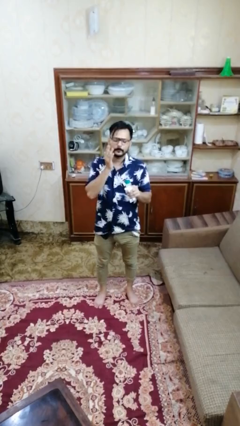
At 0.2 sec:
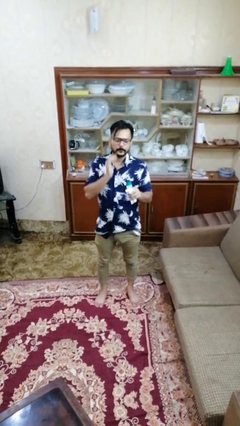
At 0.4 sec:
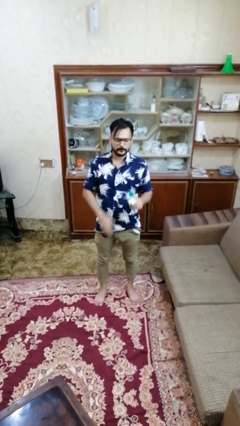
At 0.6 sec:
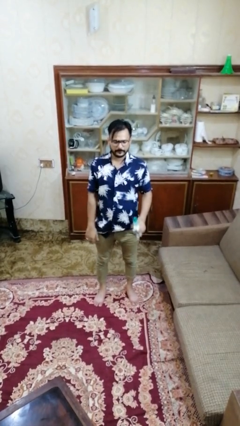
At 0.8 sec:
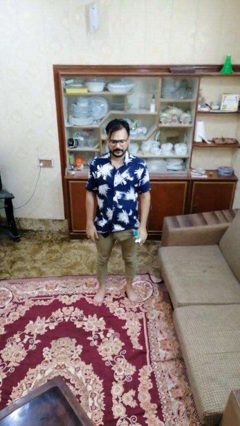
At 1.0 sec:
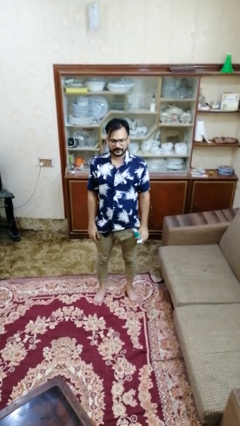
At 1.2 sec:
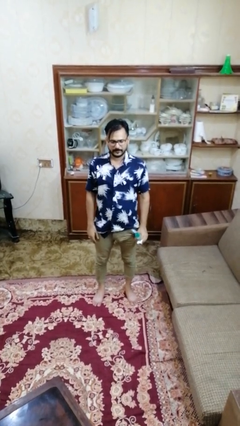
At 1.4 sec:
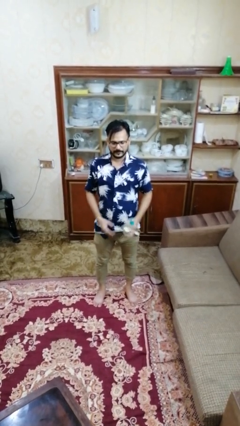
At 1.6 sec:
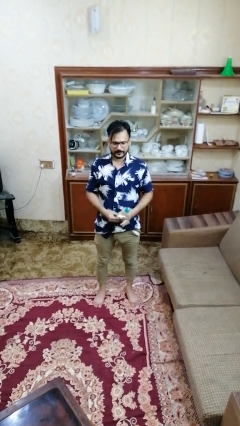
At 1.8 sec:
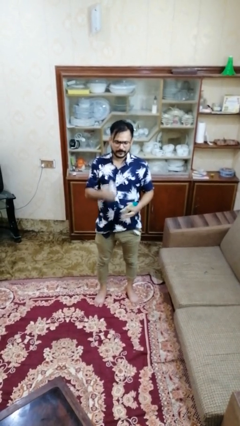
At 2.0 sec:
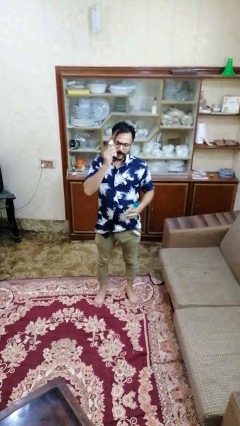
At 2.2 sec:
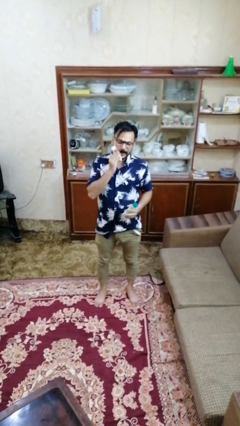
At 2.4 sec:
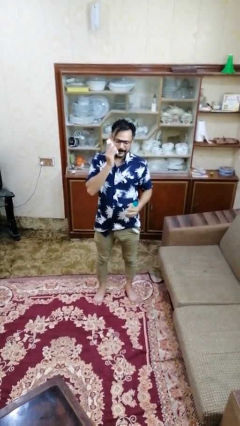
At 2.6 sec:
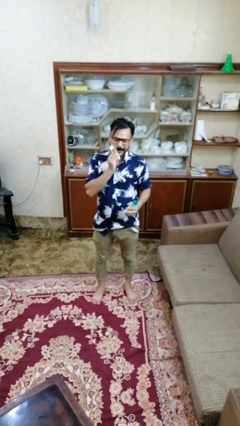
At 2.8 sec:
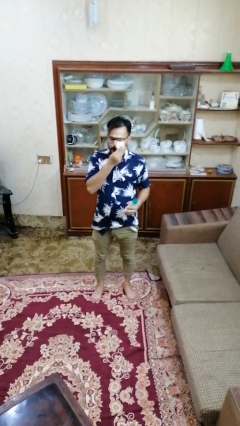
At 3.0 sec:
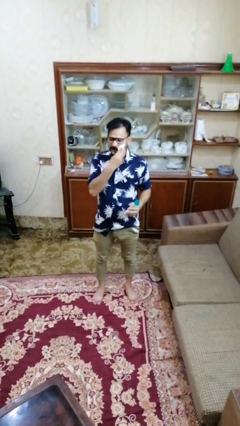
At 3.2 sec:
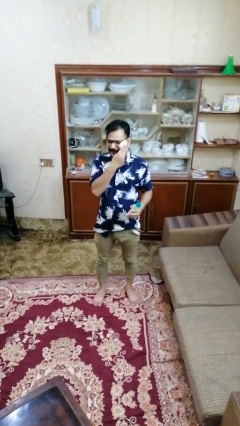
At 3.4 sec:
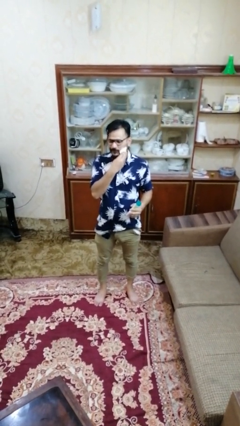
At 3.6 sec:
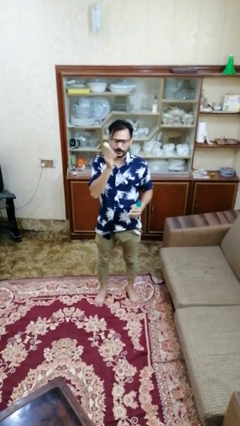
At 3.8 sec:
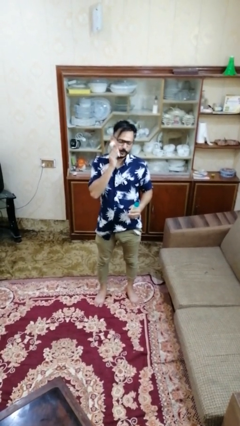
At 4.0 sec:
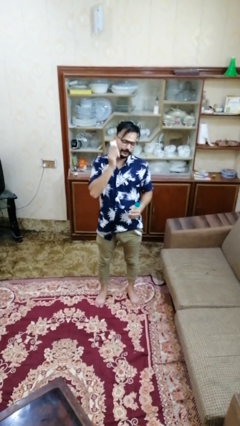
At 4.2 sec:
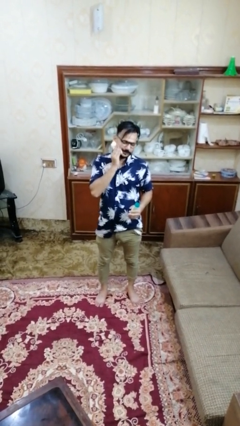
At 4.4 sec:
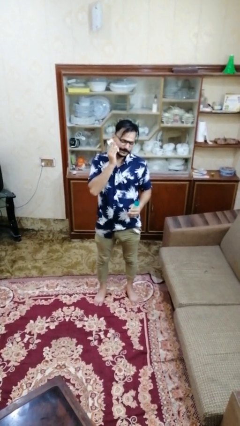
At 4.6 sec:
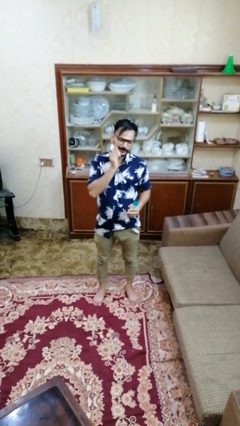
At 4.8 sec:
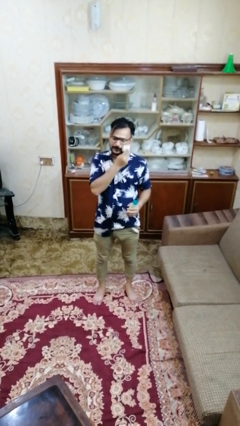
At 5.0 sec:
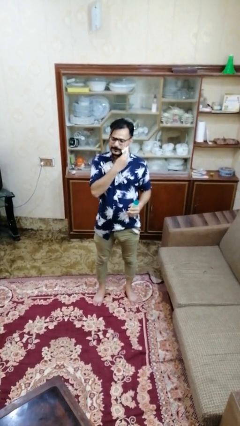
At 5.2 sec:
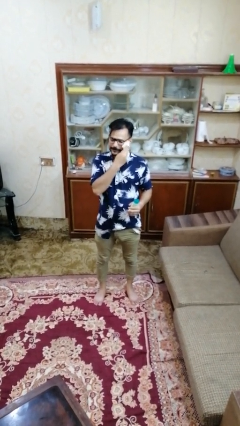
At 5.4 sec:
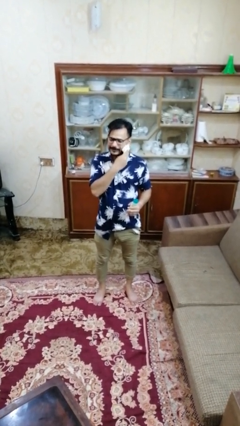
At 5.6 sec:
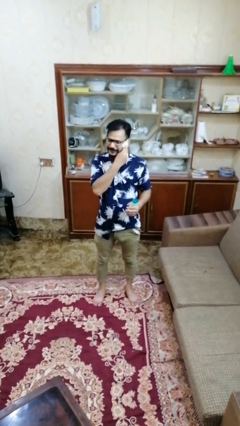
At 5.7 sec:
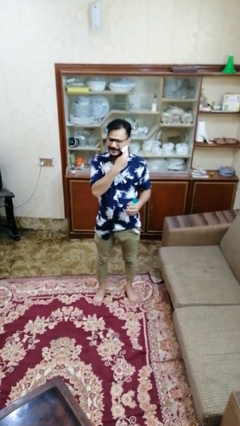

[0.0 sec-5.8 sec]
person takes off facemask

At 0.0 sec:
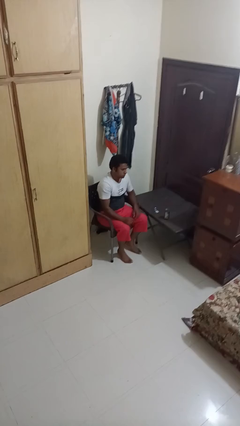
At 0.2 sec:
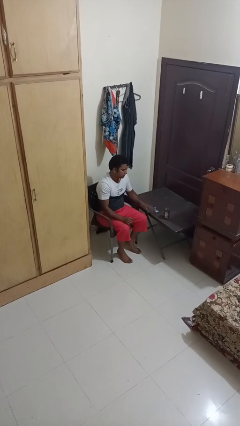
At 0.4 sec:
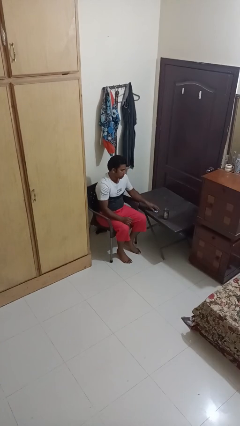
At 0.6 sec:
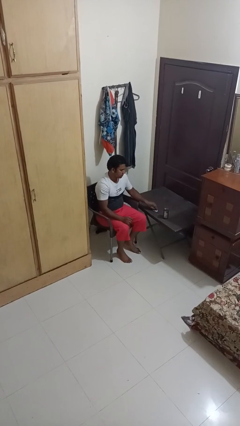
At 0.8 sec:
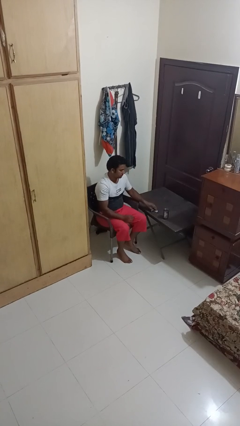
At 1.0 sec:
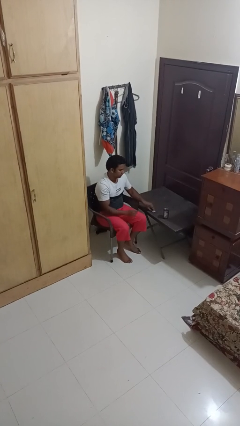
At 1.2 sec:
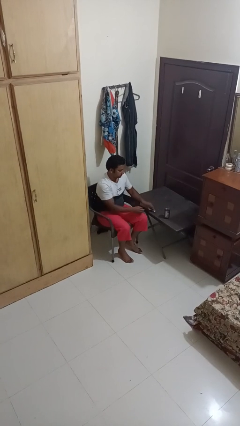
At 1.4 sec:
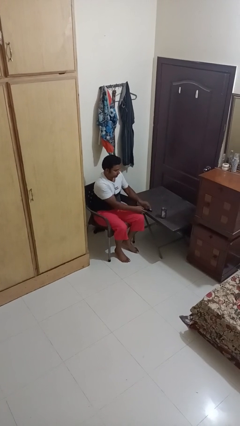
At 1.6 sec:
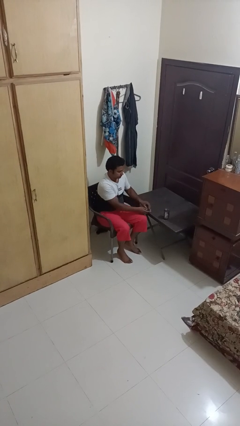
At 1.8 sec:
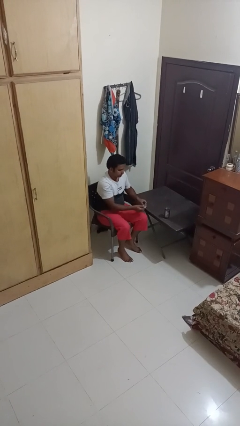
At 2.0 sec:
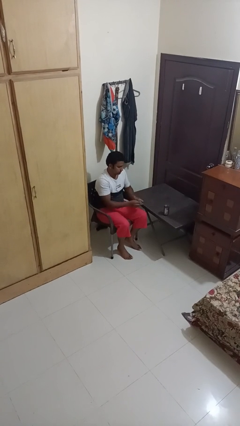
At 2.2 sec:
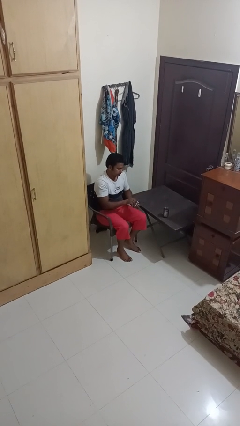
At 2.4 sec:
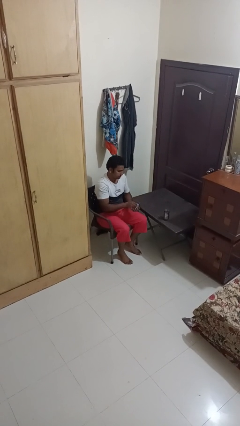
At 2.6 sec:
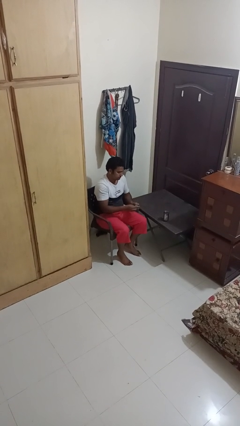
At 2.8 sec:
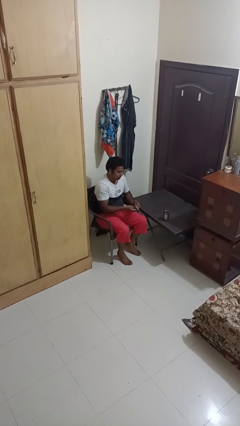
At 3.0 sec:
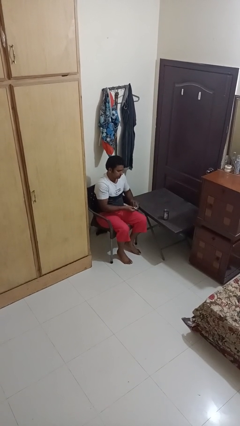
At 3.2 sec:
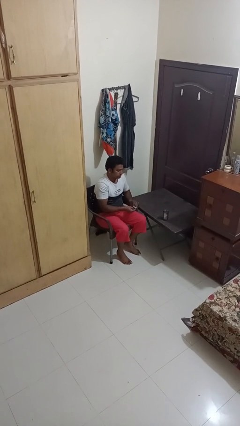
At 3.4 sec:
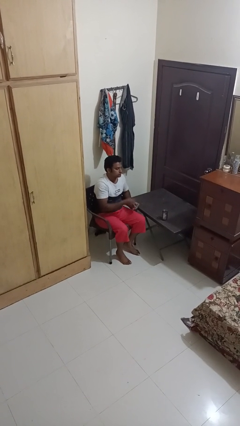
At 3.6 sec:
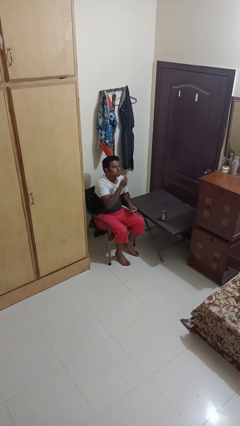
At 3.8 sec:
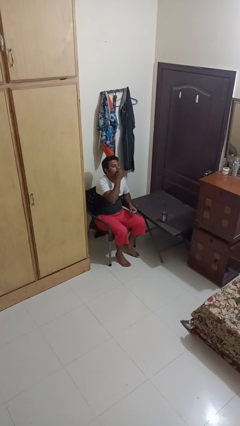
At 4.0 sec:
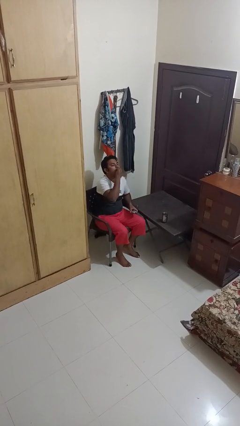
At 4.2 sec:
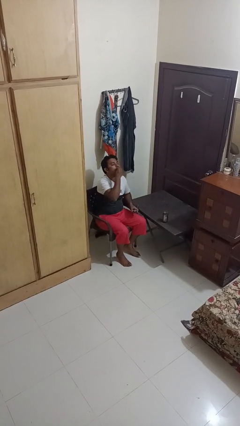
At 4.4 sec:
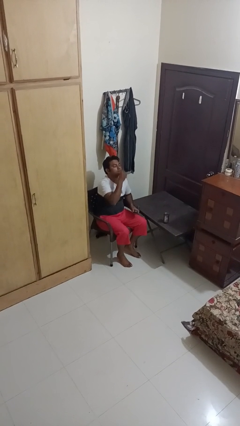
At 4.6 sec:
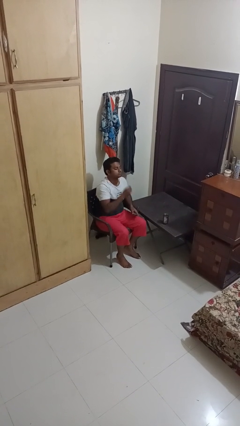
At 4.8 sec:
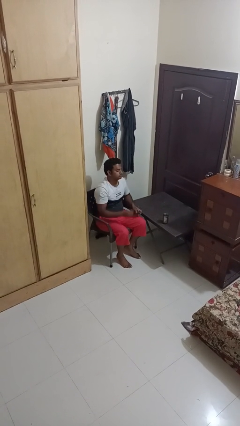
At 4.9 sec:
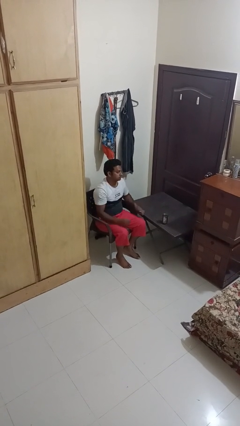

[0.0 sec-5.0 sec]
person takes medicine pills

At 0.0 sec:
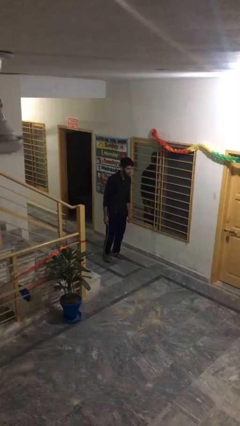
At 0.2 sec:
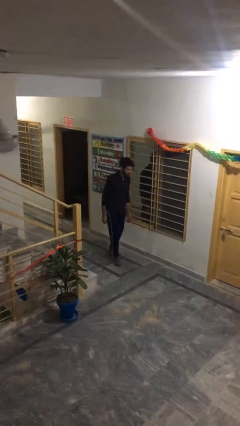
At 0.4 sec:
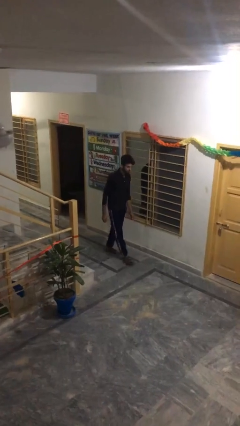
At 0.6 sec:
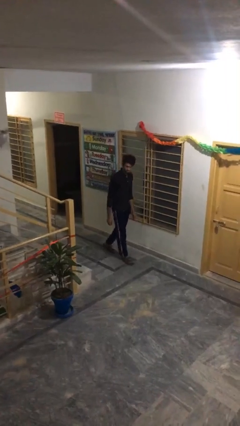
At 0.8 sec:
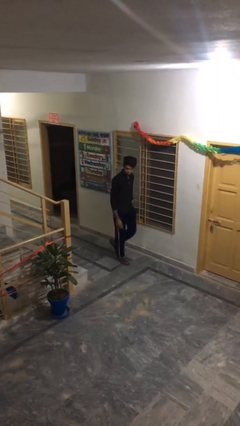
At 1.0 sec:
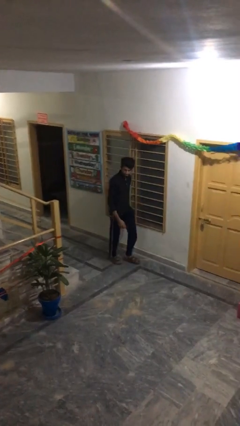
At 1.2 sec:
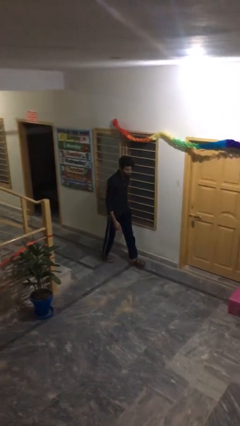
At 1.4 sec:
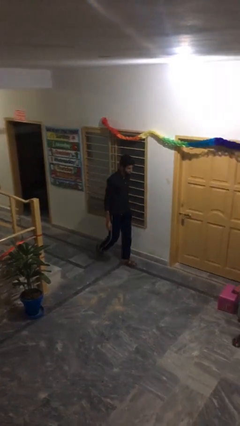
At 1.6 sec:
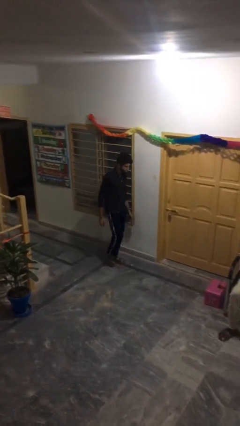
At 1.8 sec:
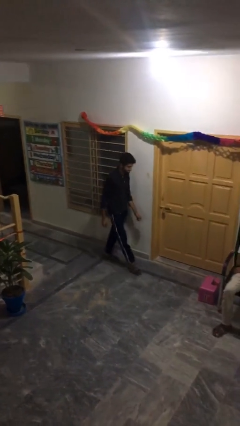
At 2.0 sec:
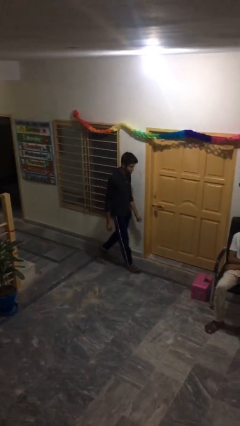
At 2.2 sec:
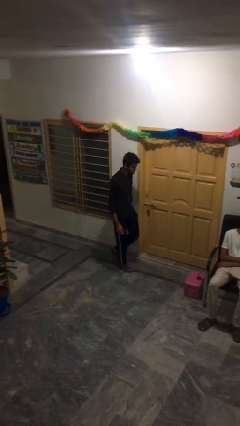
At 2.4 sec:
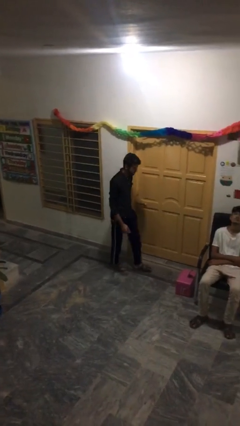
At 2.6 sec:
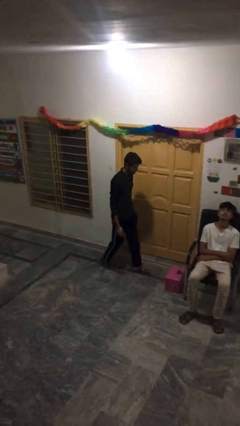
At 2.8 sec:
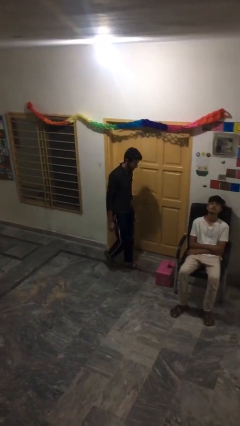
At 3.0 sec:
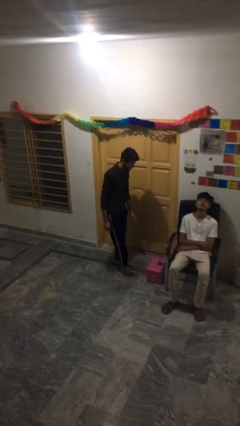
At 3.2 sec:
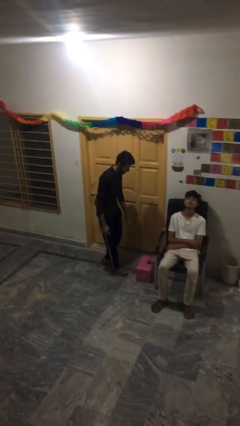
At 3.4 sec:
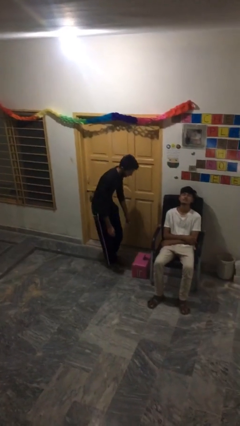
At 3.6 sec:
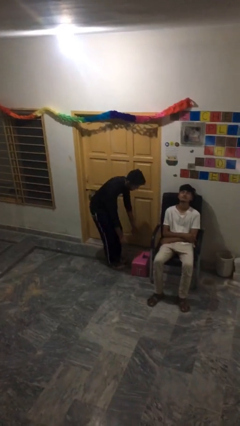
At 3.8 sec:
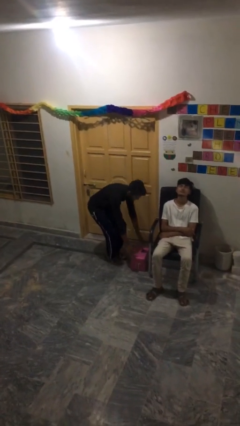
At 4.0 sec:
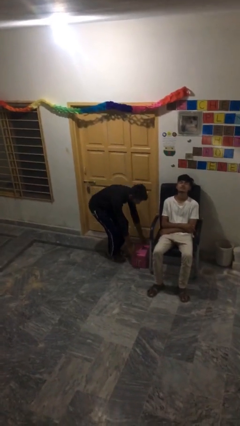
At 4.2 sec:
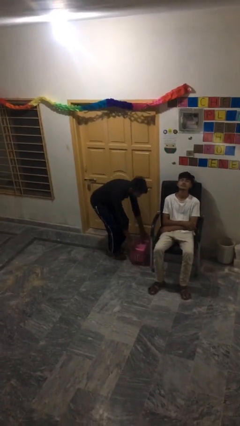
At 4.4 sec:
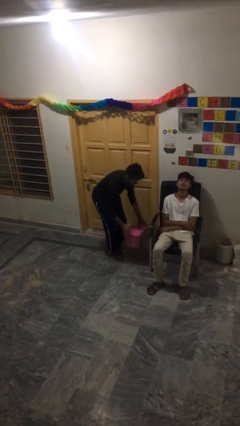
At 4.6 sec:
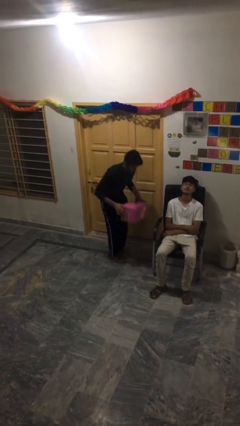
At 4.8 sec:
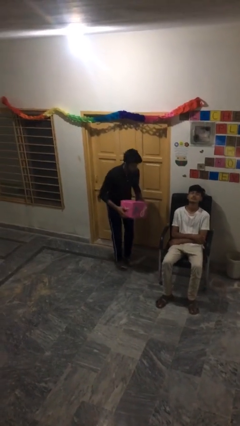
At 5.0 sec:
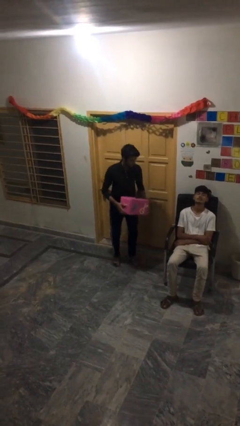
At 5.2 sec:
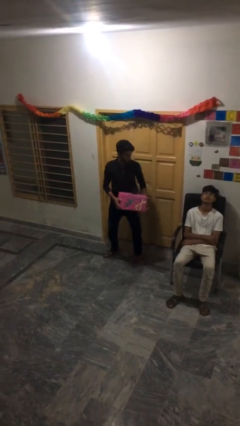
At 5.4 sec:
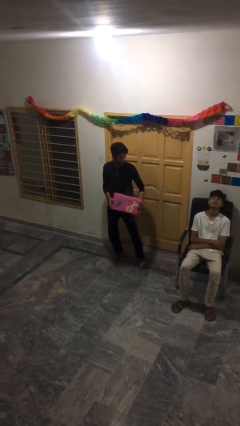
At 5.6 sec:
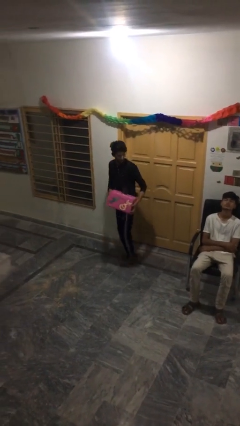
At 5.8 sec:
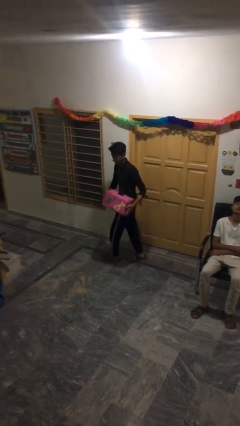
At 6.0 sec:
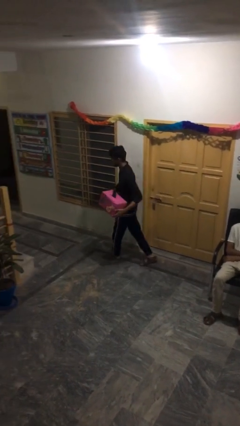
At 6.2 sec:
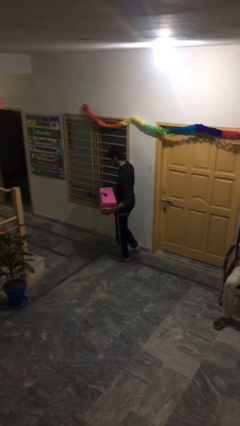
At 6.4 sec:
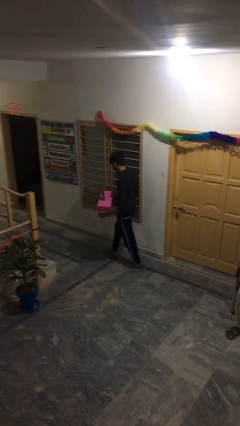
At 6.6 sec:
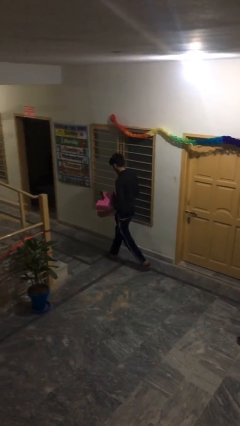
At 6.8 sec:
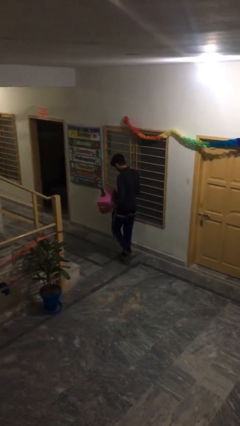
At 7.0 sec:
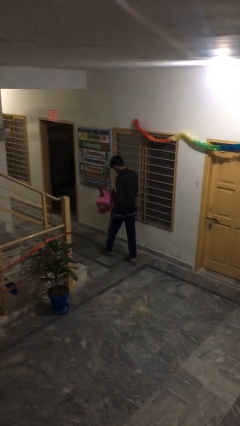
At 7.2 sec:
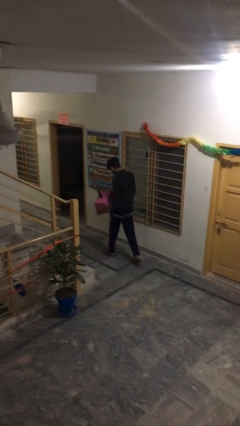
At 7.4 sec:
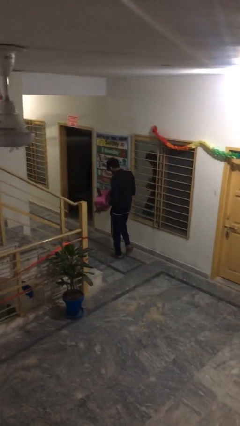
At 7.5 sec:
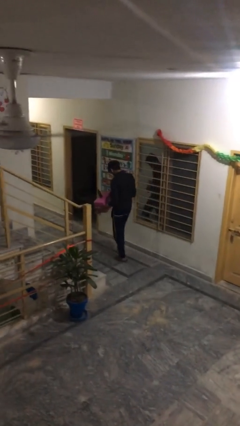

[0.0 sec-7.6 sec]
person steals object from person
